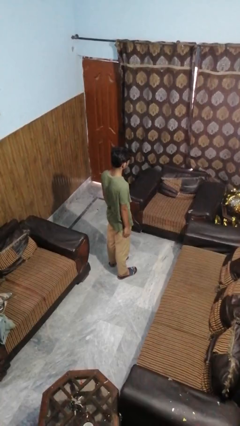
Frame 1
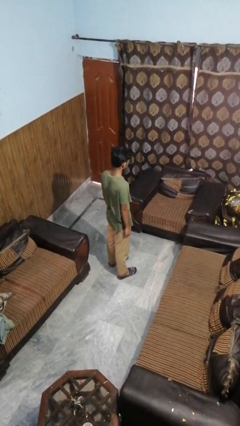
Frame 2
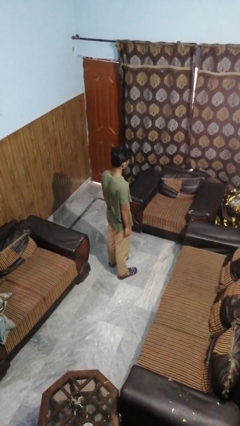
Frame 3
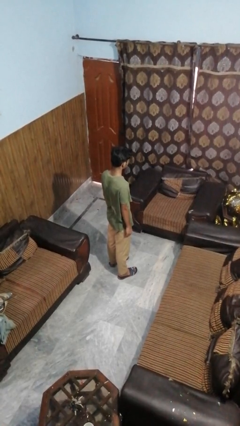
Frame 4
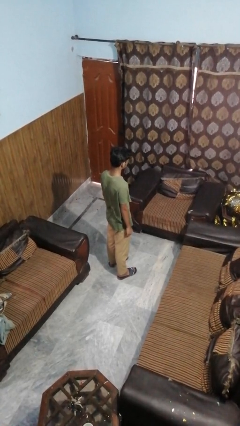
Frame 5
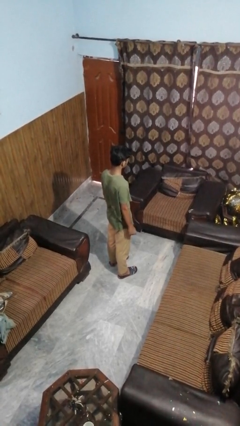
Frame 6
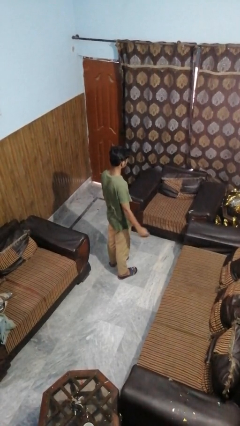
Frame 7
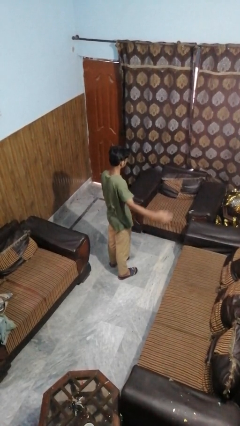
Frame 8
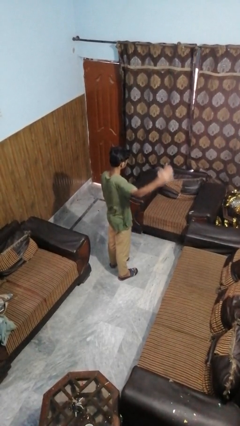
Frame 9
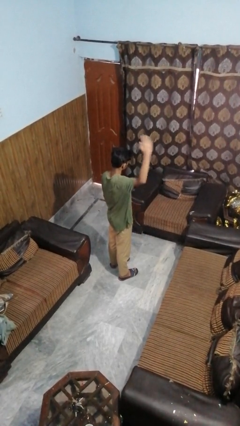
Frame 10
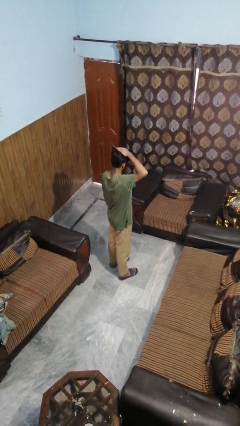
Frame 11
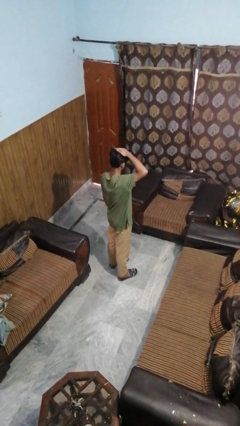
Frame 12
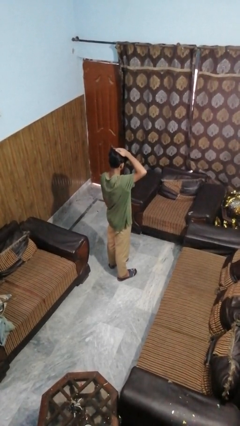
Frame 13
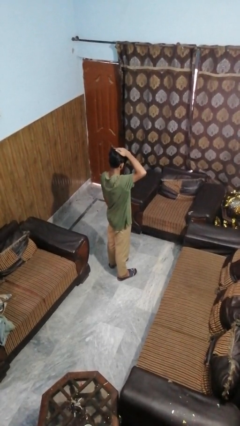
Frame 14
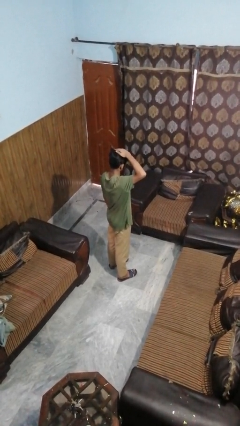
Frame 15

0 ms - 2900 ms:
person pats head

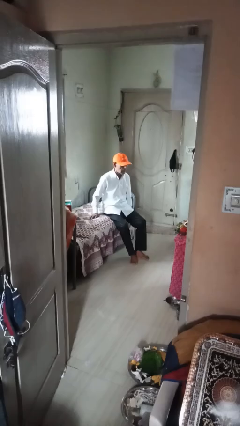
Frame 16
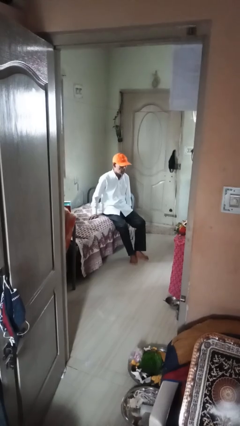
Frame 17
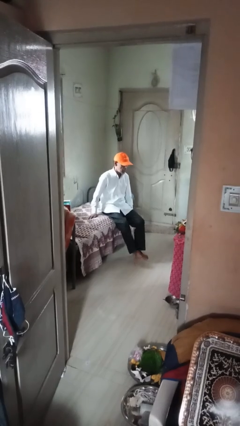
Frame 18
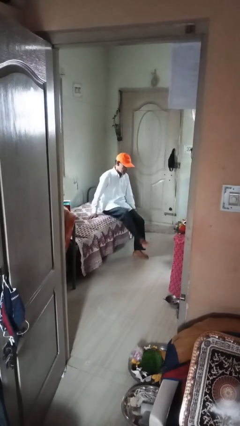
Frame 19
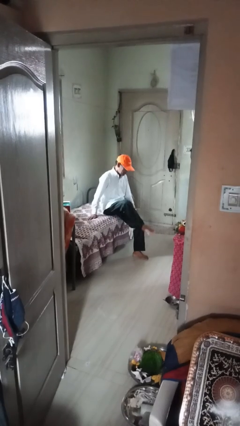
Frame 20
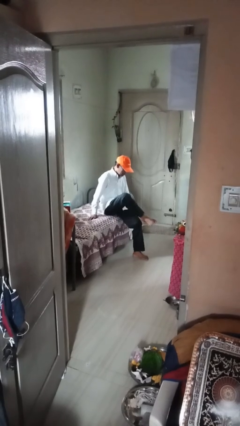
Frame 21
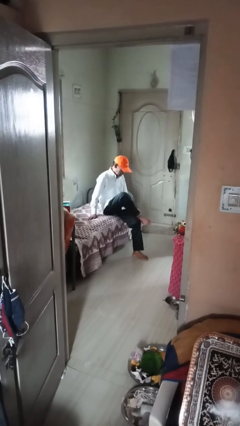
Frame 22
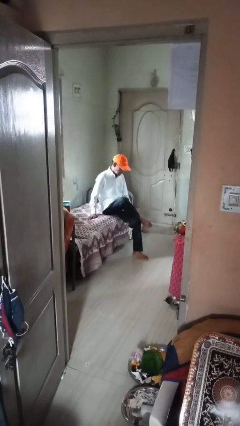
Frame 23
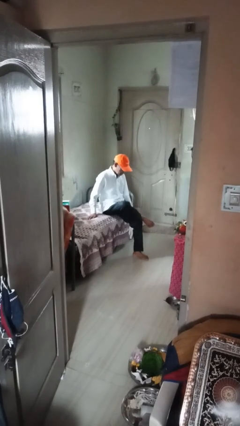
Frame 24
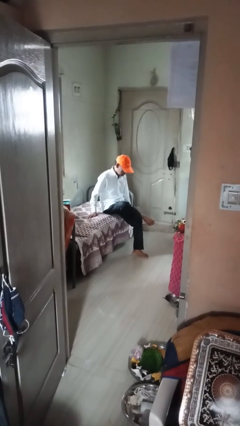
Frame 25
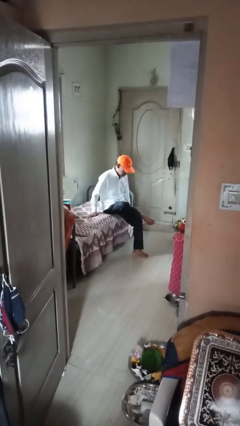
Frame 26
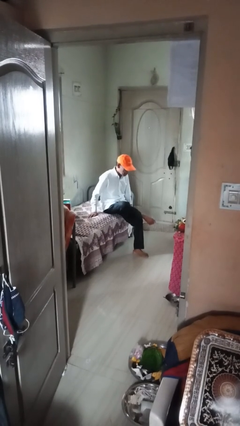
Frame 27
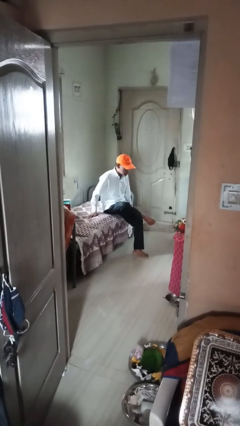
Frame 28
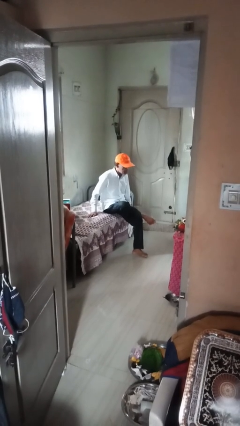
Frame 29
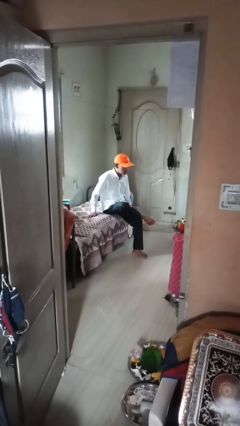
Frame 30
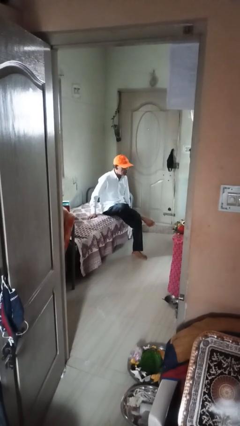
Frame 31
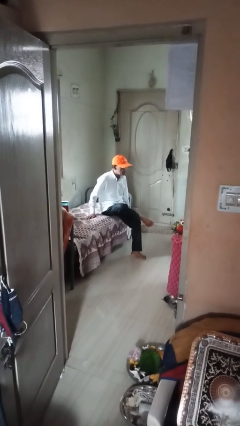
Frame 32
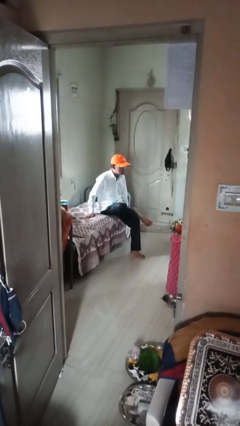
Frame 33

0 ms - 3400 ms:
person crosses legs

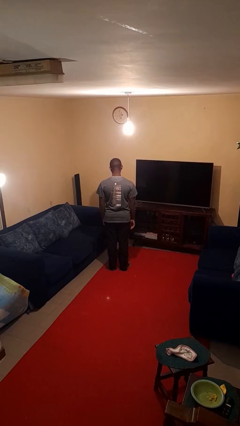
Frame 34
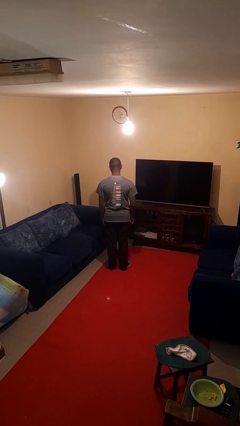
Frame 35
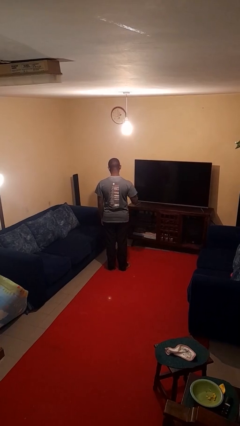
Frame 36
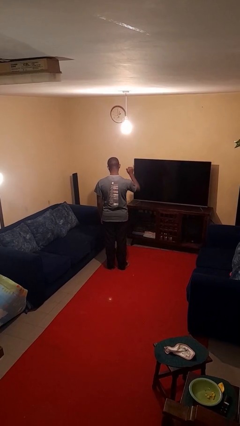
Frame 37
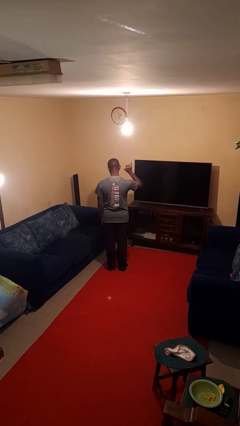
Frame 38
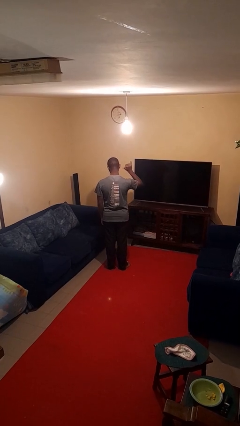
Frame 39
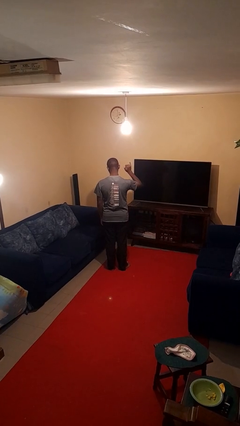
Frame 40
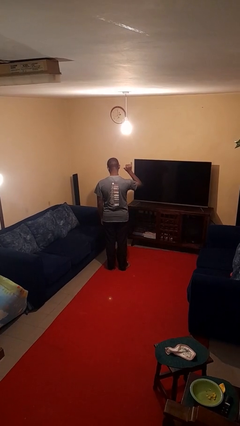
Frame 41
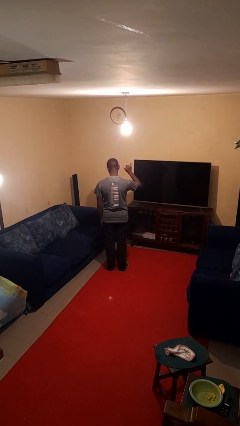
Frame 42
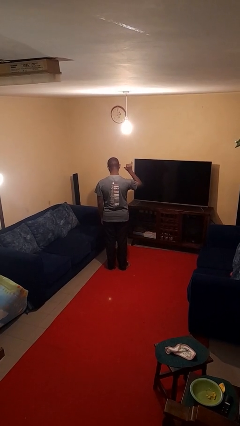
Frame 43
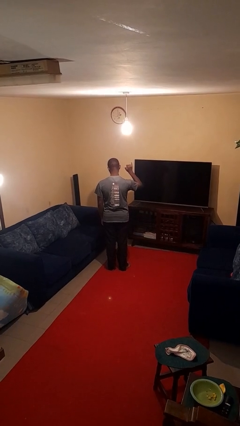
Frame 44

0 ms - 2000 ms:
person gestures hang loose

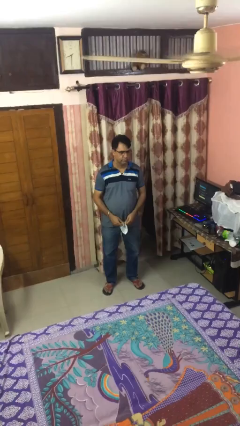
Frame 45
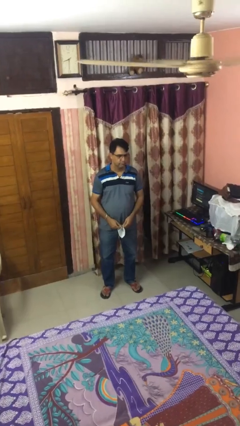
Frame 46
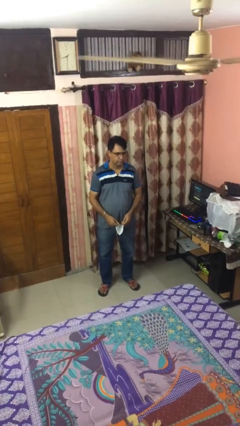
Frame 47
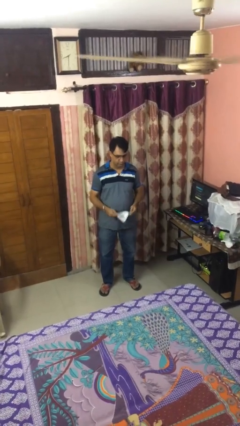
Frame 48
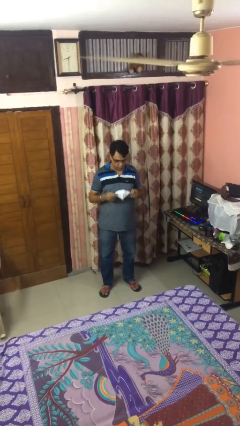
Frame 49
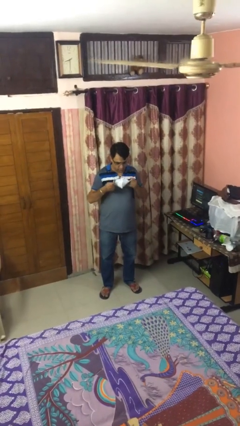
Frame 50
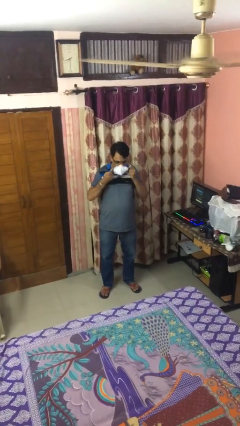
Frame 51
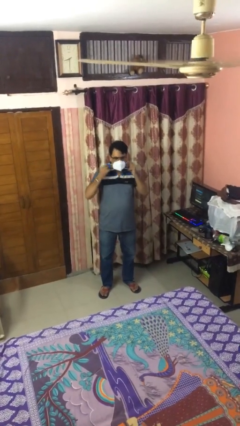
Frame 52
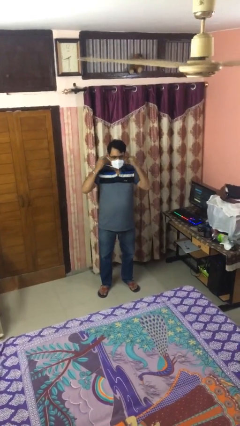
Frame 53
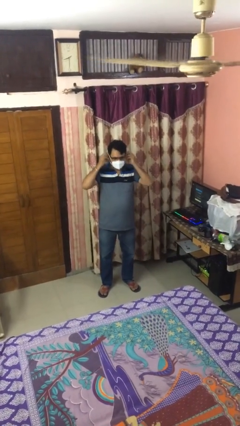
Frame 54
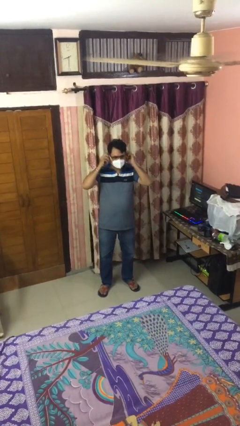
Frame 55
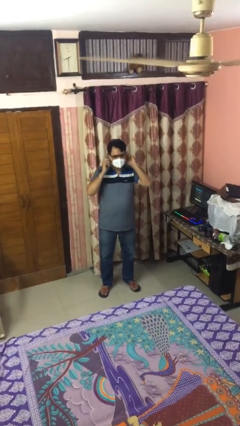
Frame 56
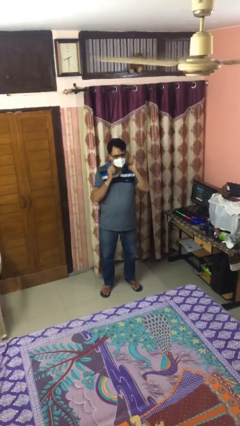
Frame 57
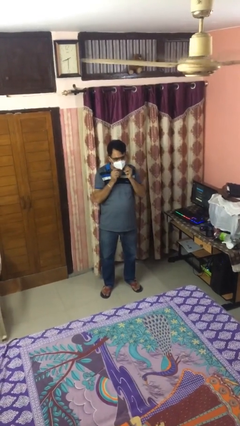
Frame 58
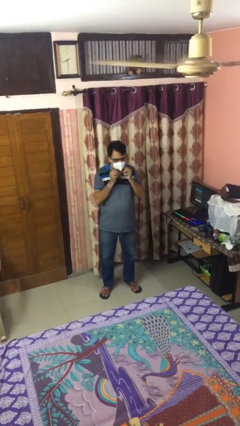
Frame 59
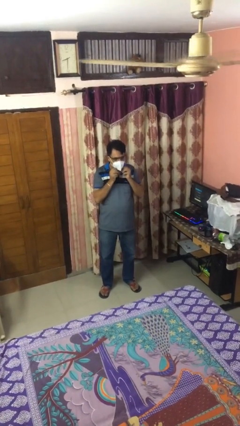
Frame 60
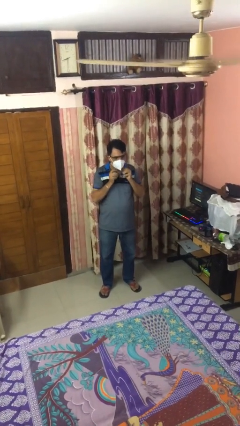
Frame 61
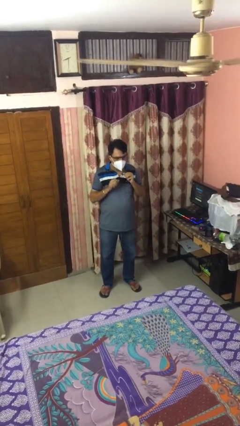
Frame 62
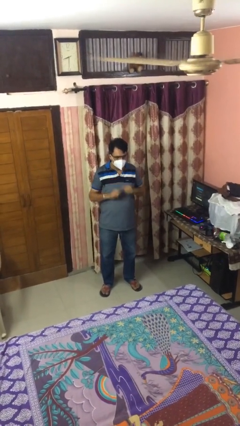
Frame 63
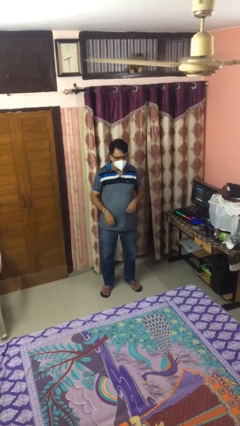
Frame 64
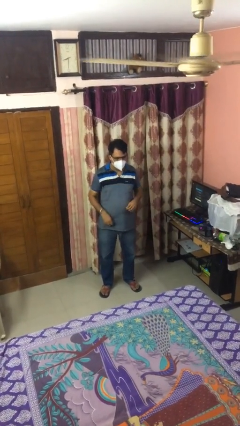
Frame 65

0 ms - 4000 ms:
person puts on facemask

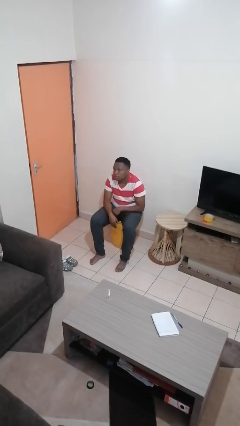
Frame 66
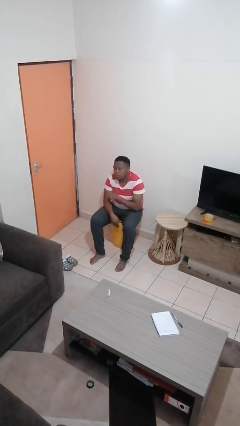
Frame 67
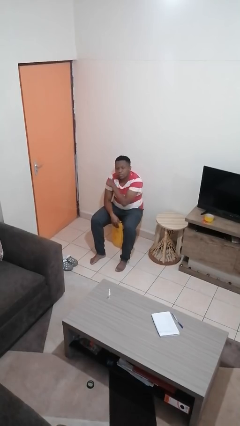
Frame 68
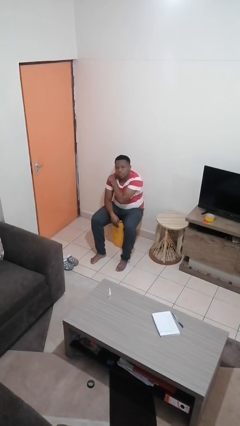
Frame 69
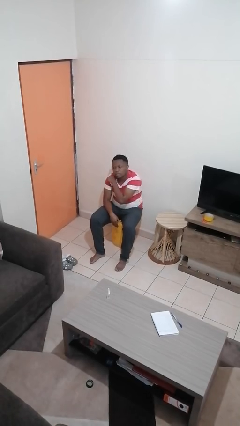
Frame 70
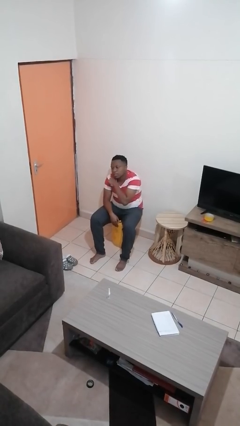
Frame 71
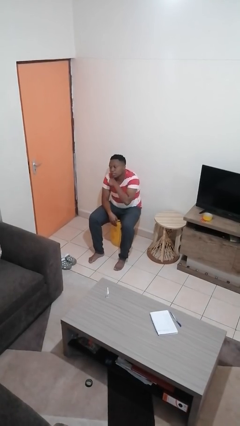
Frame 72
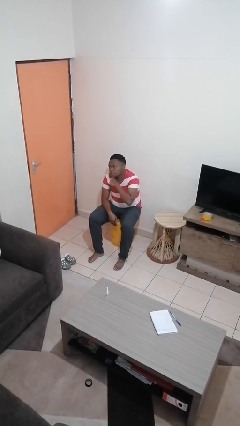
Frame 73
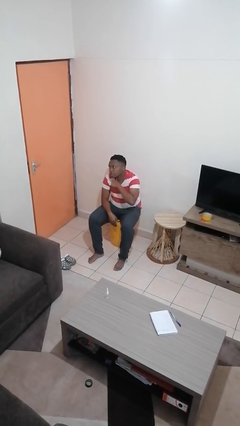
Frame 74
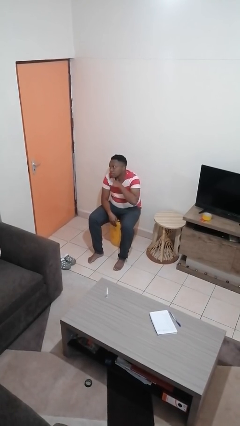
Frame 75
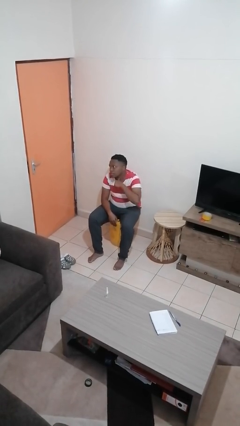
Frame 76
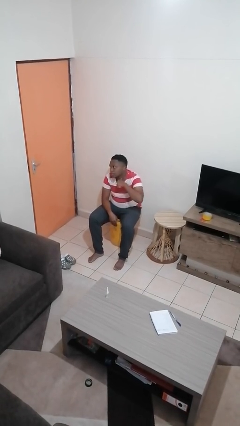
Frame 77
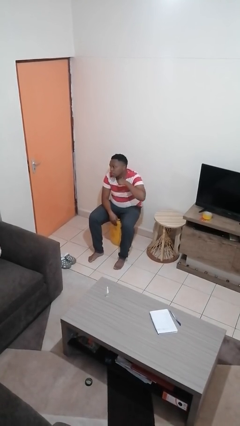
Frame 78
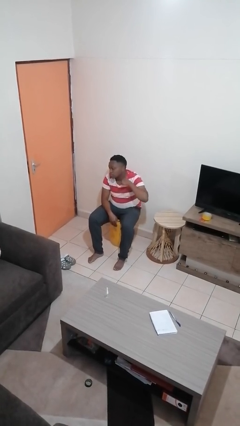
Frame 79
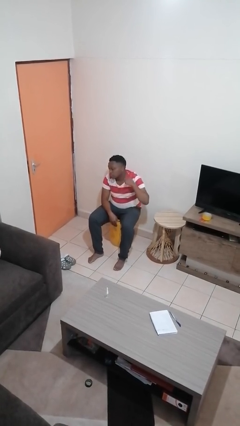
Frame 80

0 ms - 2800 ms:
person gestures cut

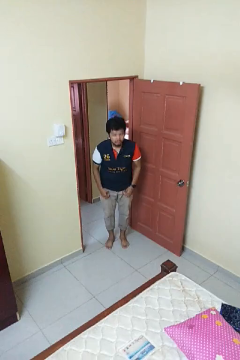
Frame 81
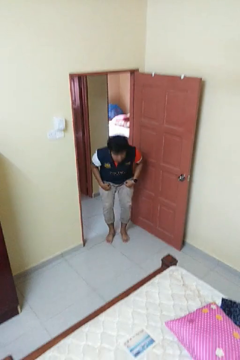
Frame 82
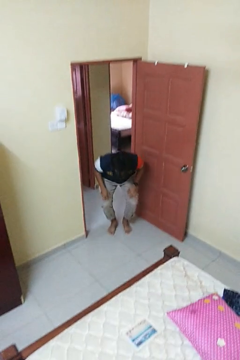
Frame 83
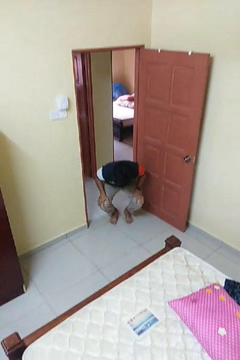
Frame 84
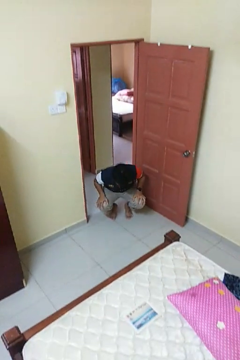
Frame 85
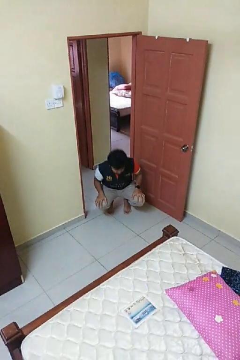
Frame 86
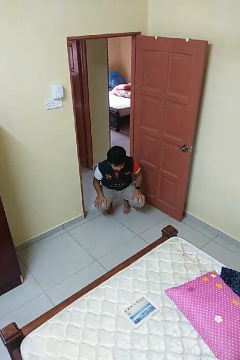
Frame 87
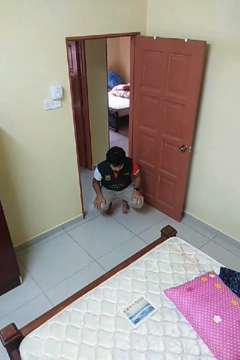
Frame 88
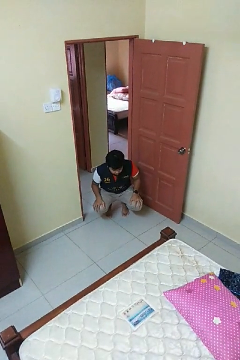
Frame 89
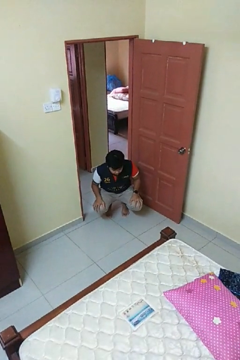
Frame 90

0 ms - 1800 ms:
person squats

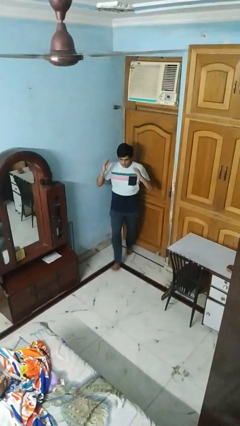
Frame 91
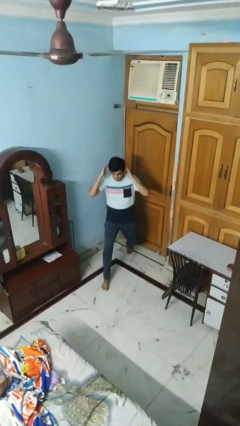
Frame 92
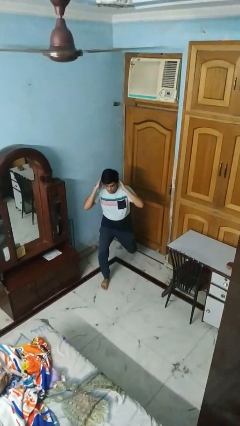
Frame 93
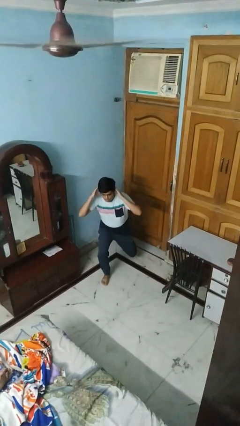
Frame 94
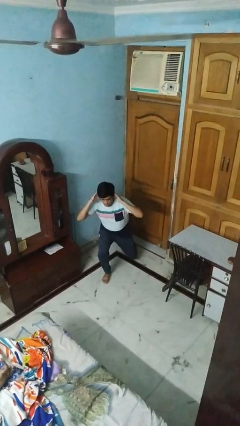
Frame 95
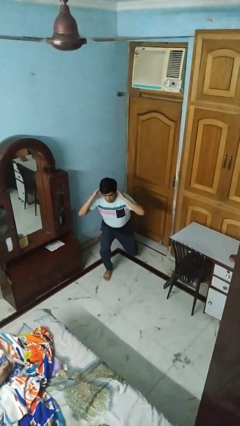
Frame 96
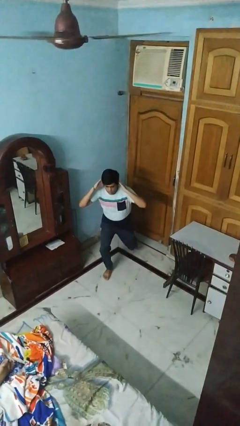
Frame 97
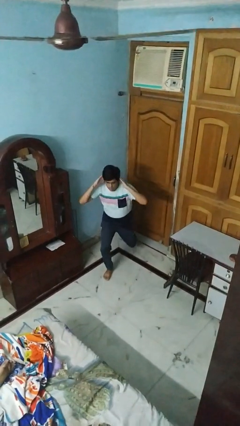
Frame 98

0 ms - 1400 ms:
person exercises with lunges
